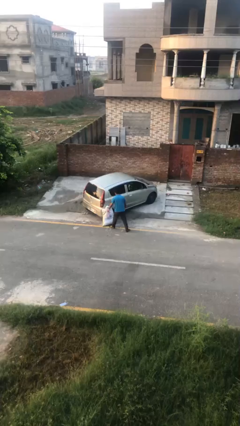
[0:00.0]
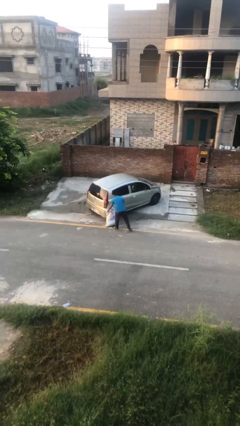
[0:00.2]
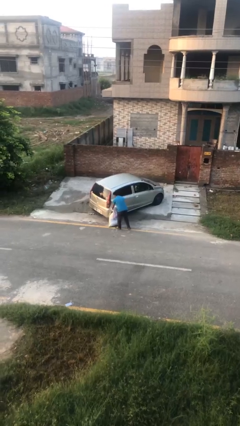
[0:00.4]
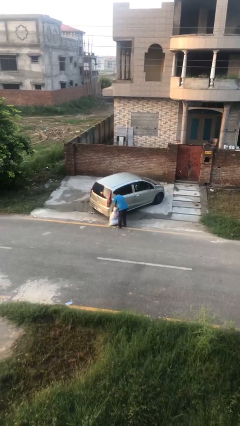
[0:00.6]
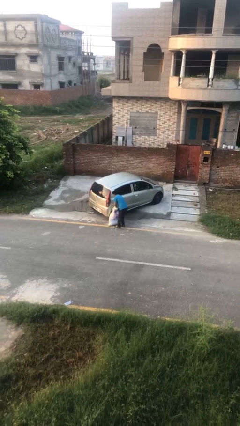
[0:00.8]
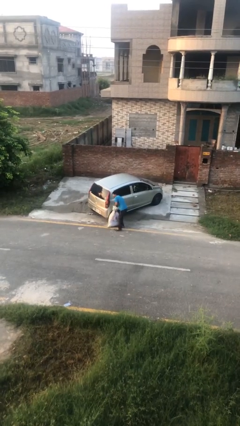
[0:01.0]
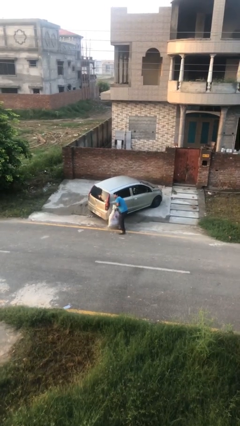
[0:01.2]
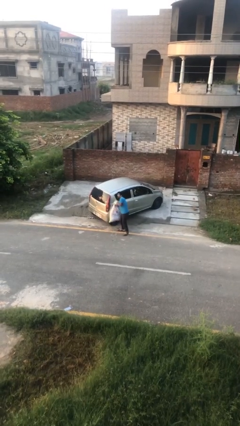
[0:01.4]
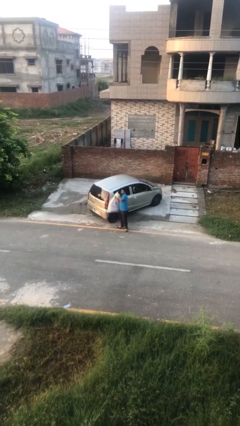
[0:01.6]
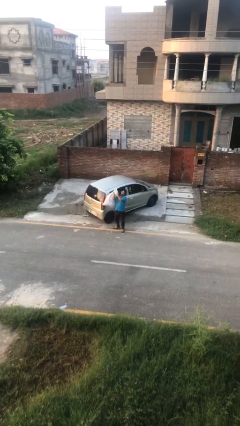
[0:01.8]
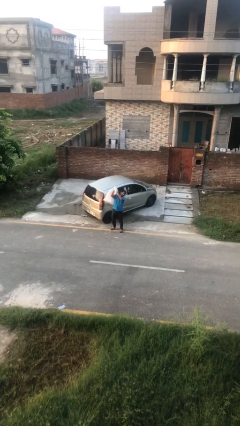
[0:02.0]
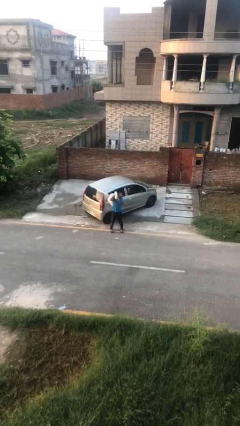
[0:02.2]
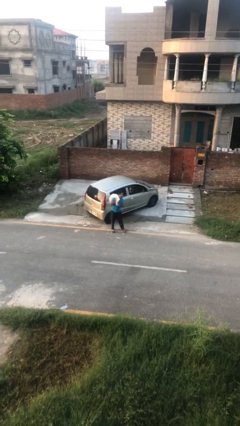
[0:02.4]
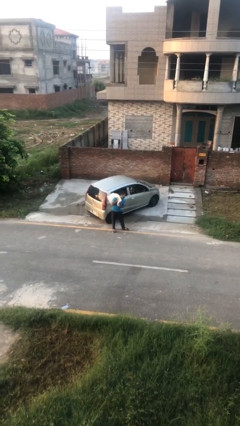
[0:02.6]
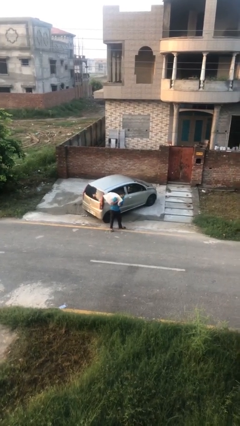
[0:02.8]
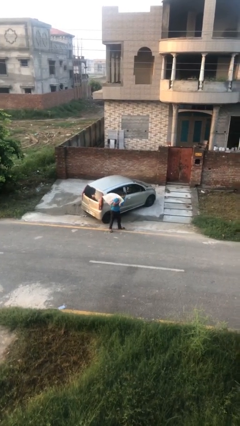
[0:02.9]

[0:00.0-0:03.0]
person picks up object from floor

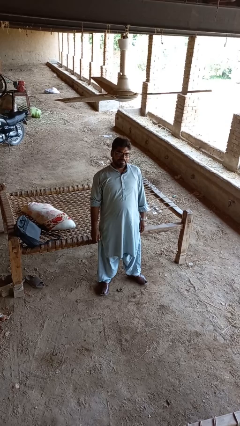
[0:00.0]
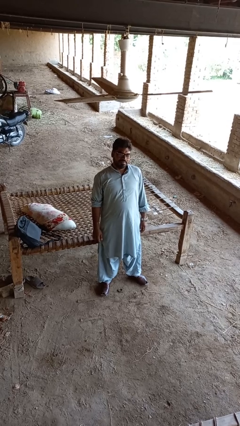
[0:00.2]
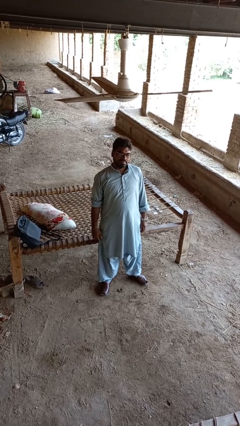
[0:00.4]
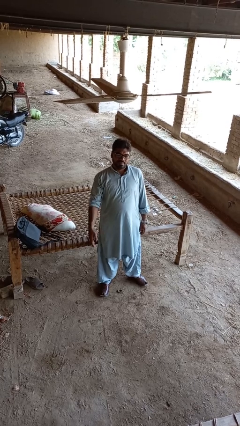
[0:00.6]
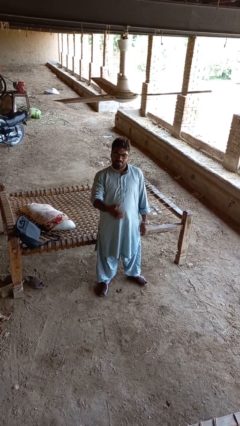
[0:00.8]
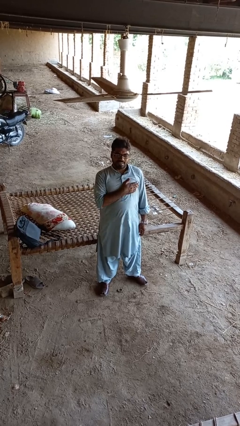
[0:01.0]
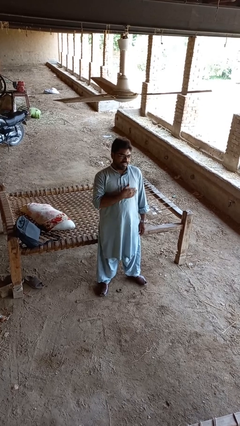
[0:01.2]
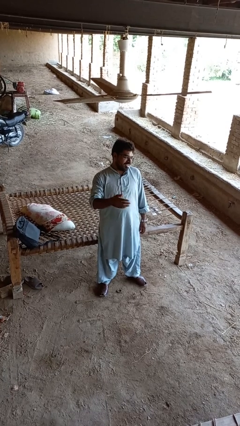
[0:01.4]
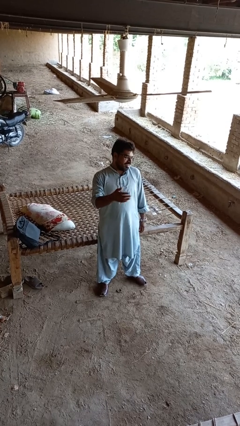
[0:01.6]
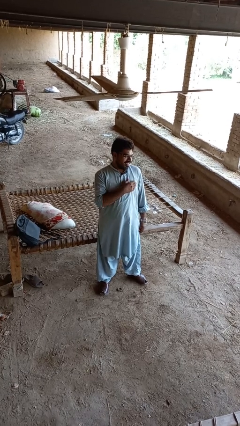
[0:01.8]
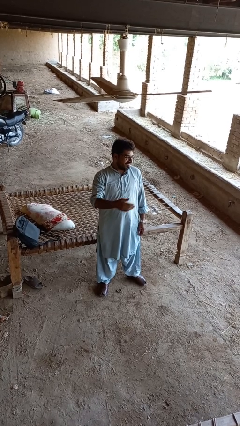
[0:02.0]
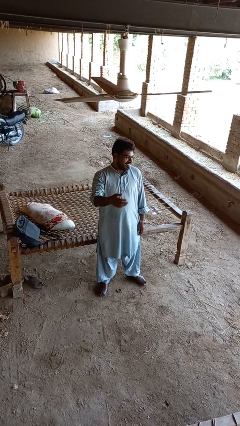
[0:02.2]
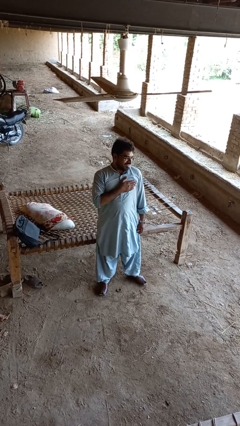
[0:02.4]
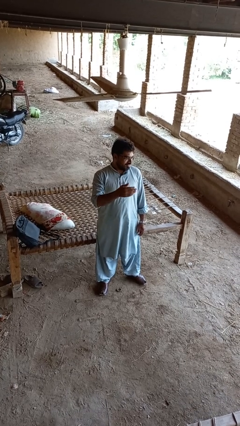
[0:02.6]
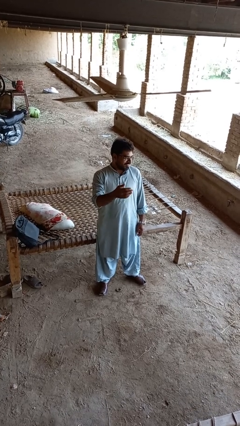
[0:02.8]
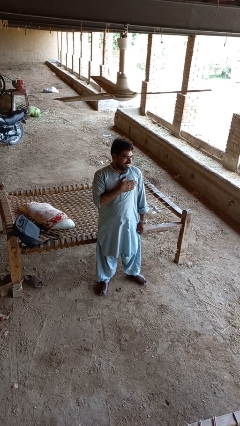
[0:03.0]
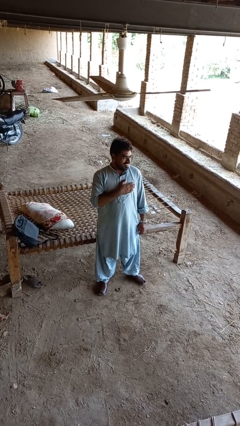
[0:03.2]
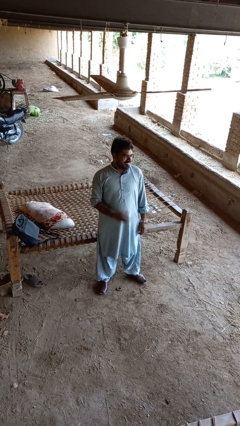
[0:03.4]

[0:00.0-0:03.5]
person drums on chest

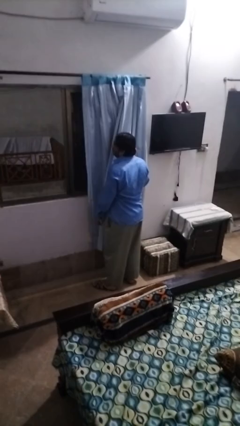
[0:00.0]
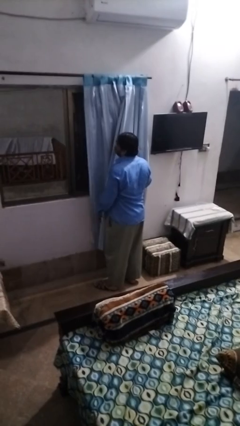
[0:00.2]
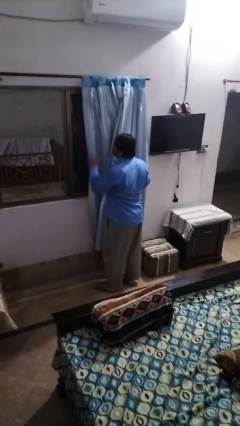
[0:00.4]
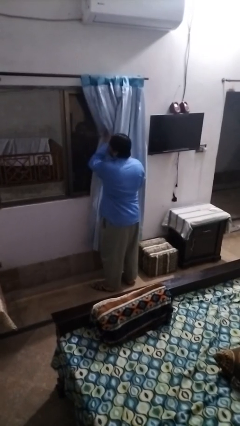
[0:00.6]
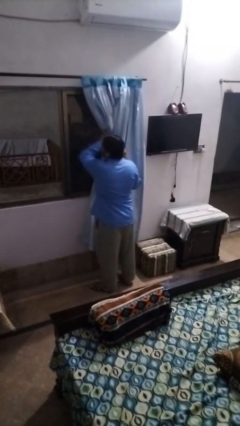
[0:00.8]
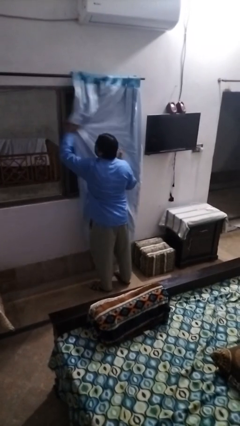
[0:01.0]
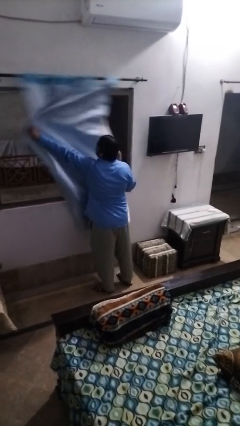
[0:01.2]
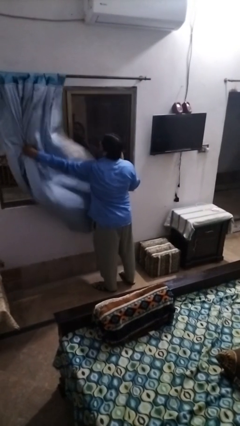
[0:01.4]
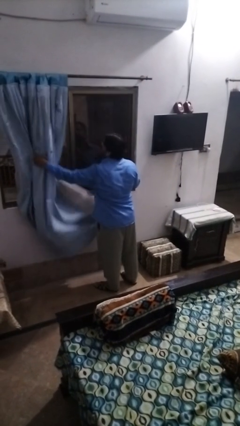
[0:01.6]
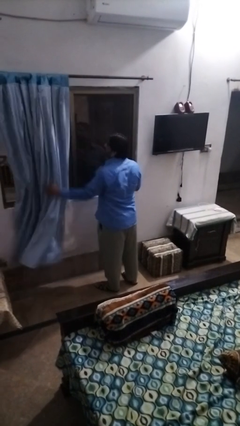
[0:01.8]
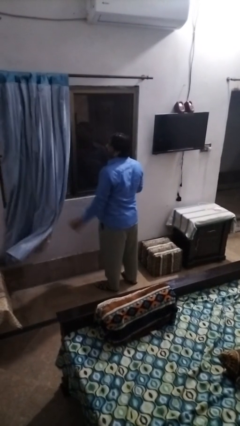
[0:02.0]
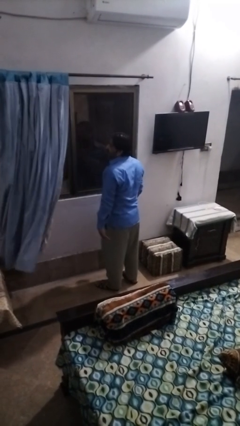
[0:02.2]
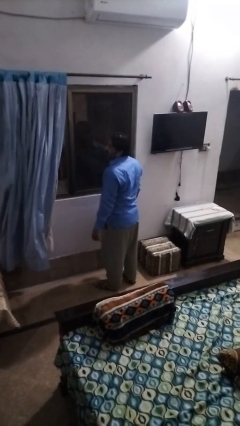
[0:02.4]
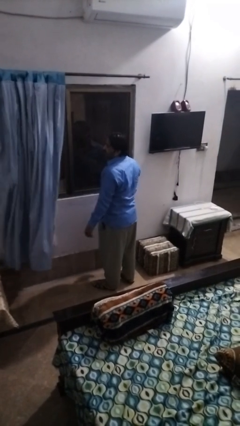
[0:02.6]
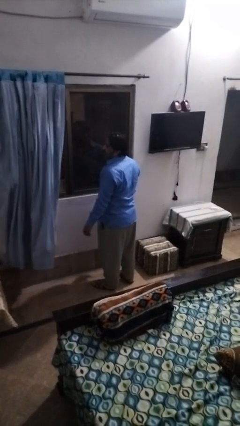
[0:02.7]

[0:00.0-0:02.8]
person closes curtains

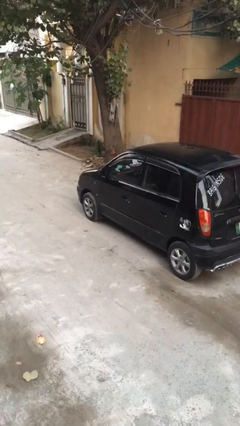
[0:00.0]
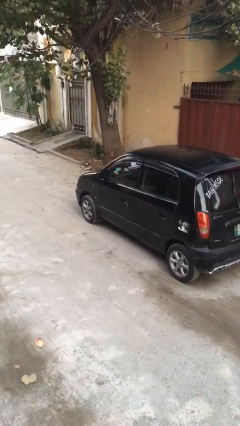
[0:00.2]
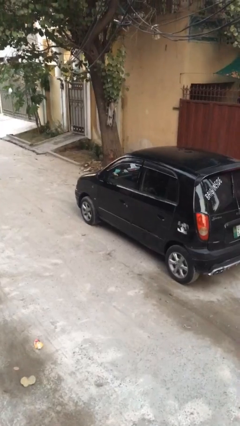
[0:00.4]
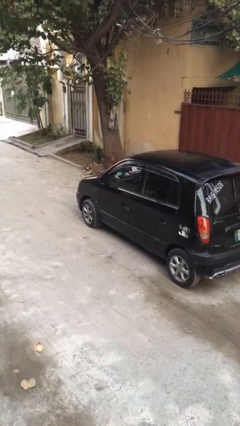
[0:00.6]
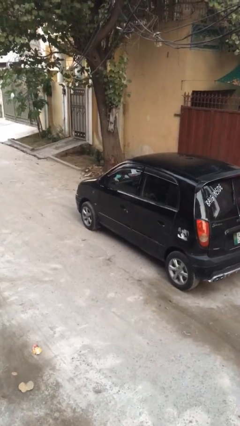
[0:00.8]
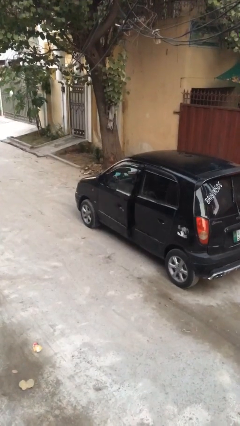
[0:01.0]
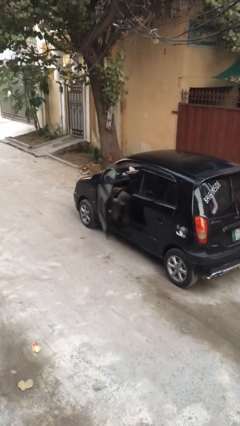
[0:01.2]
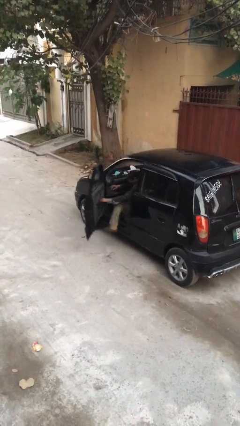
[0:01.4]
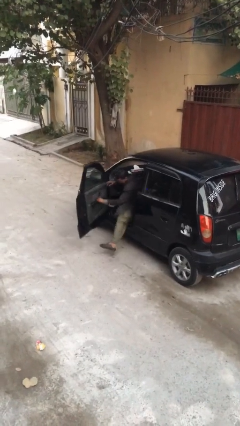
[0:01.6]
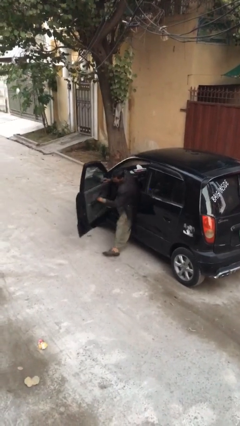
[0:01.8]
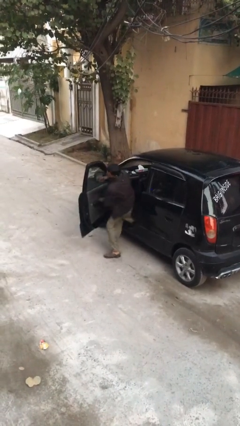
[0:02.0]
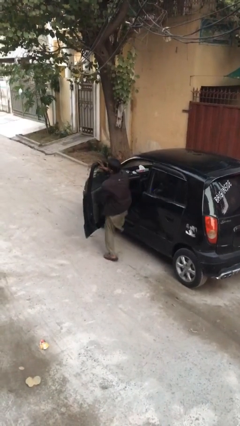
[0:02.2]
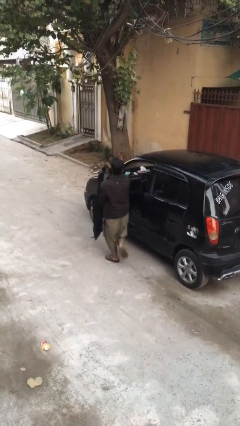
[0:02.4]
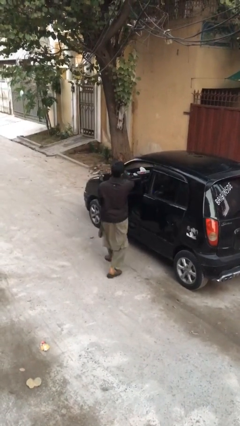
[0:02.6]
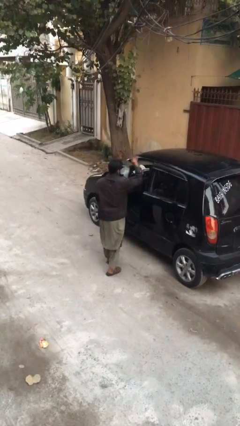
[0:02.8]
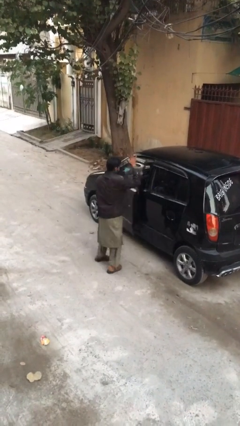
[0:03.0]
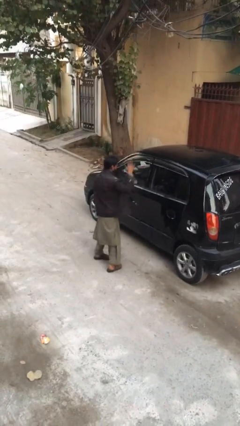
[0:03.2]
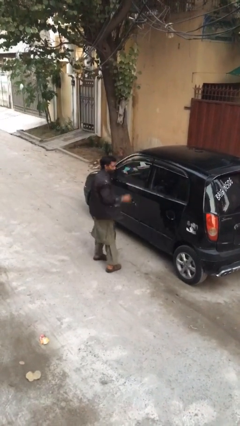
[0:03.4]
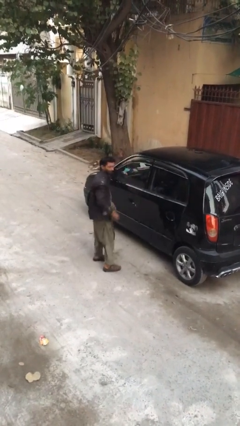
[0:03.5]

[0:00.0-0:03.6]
car drops off person

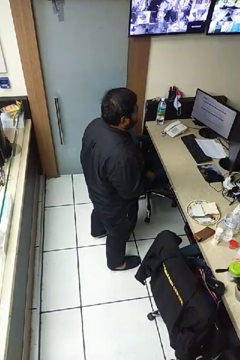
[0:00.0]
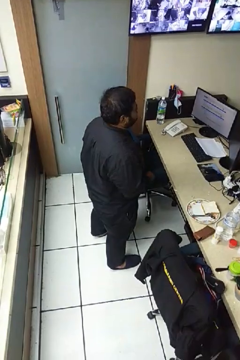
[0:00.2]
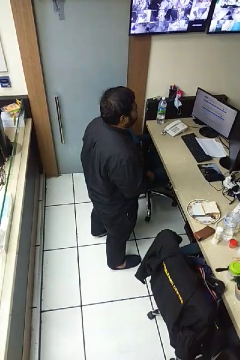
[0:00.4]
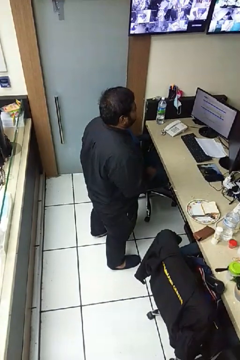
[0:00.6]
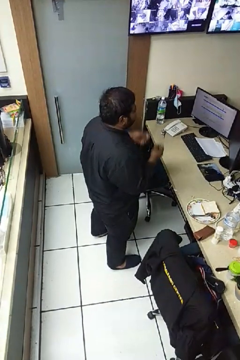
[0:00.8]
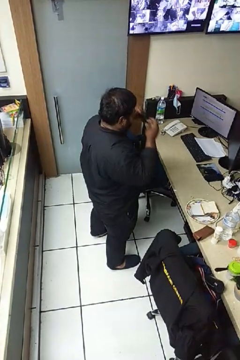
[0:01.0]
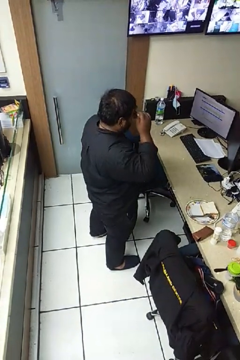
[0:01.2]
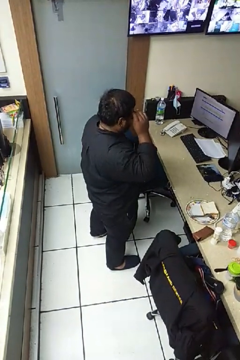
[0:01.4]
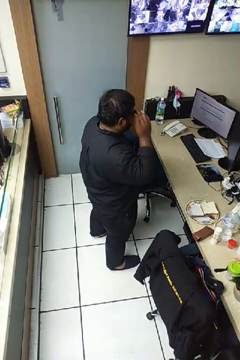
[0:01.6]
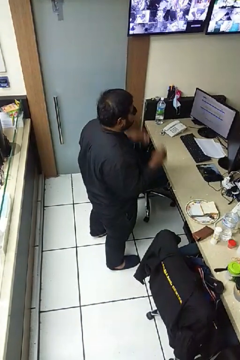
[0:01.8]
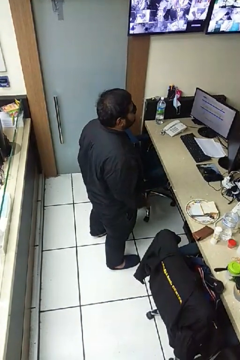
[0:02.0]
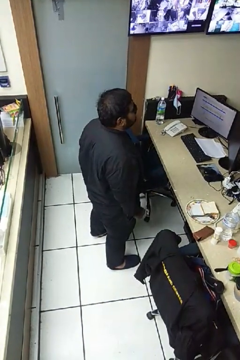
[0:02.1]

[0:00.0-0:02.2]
person puts on sunglasses

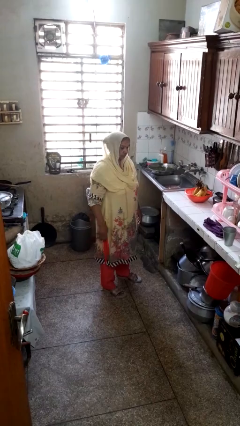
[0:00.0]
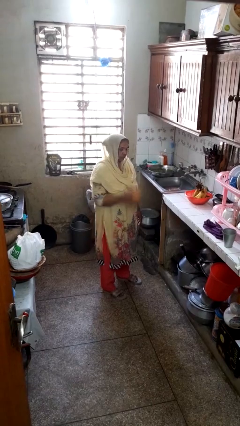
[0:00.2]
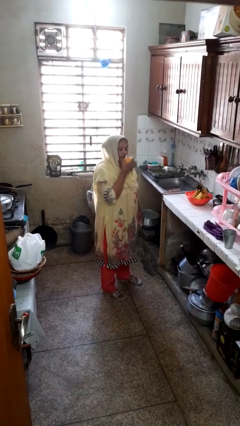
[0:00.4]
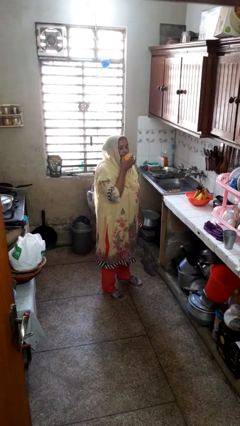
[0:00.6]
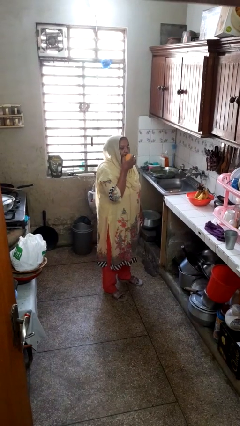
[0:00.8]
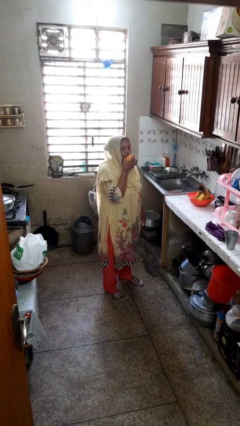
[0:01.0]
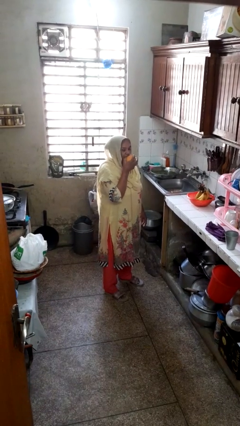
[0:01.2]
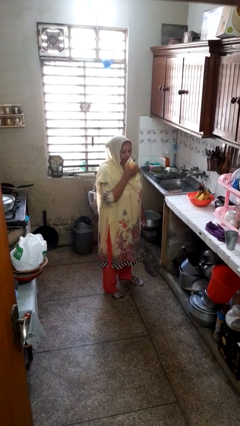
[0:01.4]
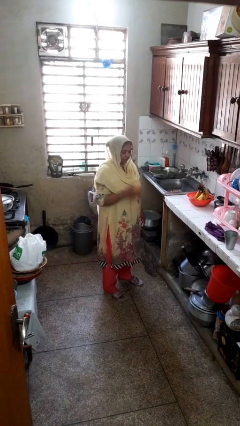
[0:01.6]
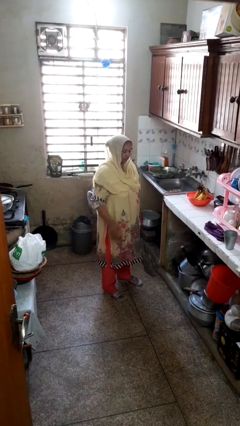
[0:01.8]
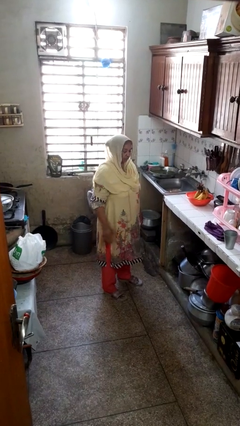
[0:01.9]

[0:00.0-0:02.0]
person eats apple

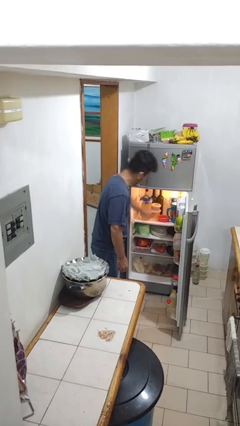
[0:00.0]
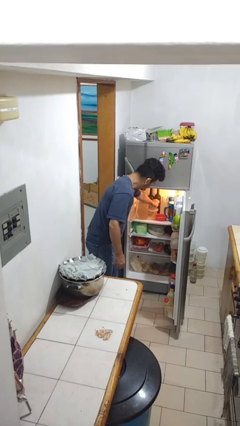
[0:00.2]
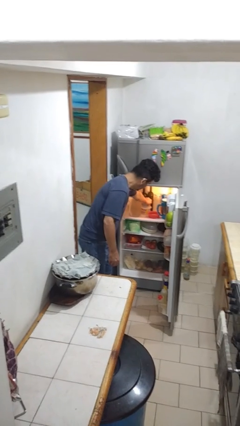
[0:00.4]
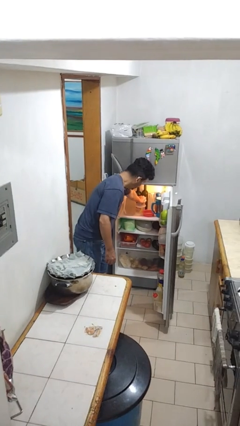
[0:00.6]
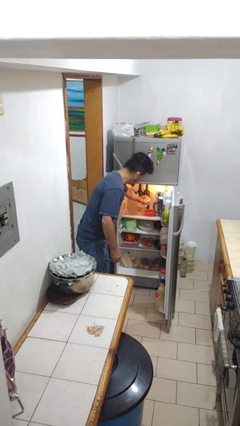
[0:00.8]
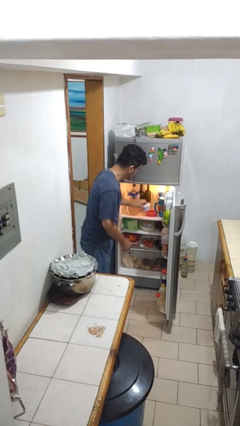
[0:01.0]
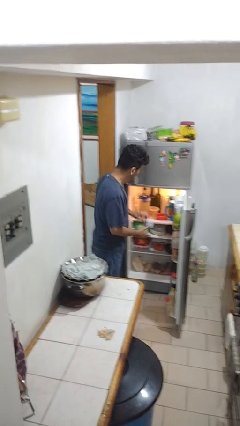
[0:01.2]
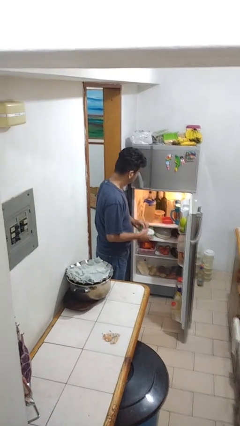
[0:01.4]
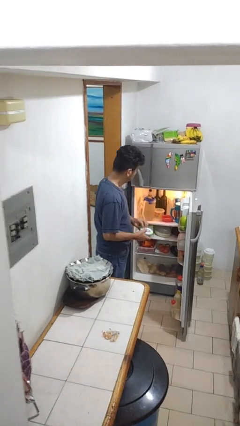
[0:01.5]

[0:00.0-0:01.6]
person takes object from refrigerator
